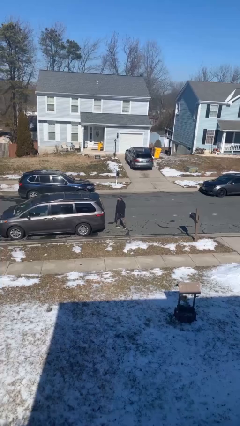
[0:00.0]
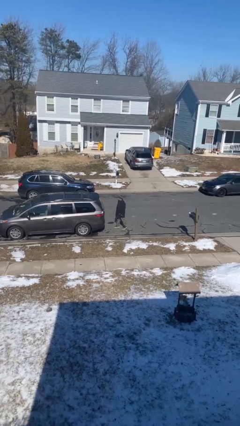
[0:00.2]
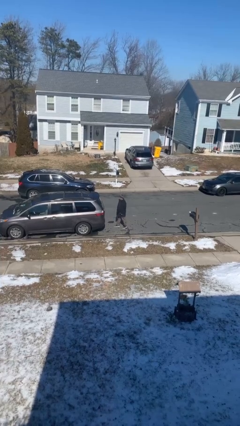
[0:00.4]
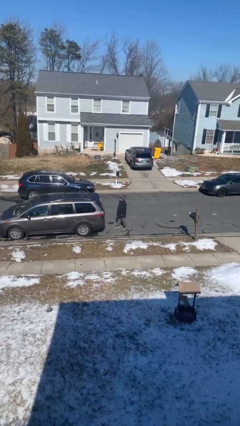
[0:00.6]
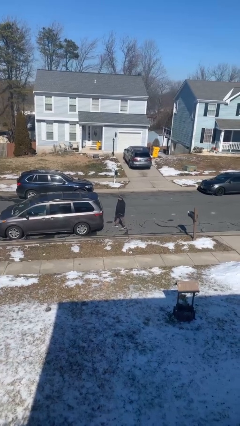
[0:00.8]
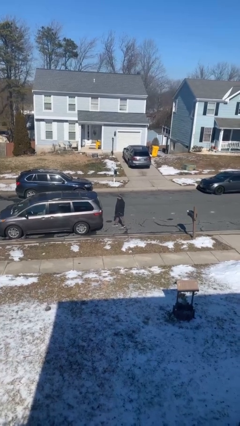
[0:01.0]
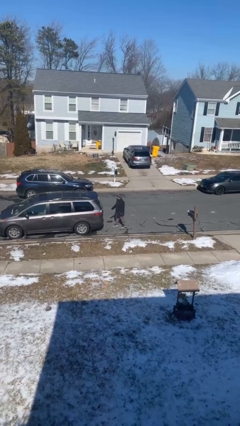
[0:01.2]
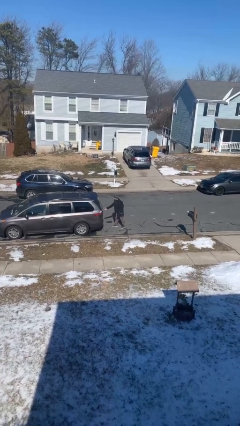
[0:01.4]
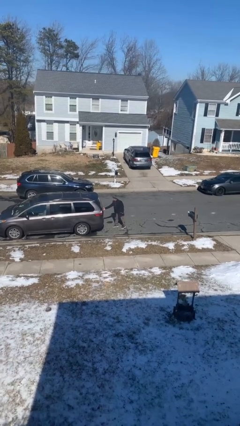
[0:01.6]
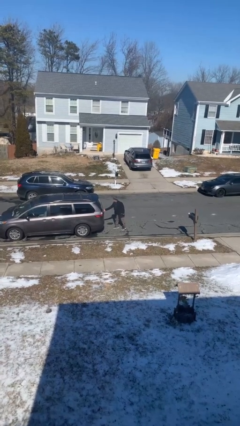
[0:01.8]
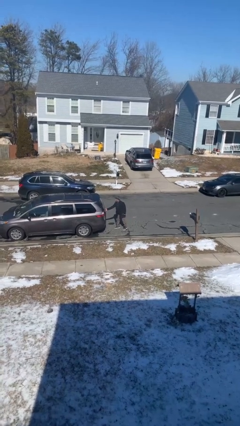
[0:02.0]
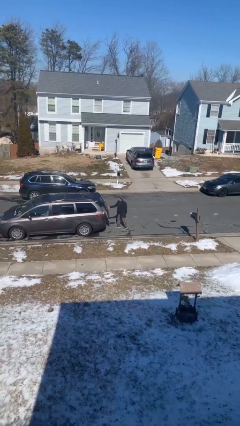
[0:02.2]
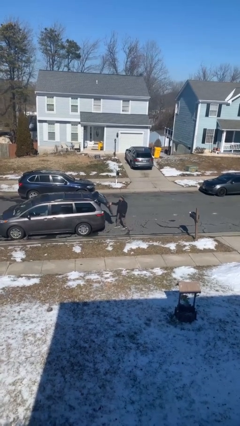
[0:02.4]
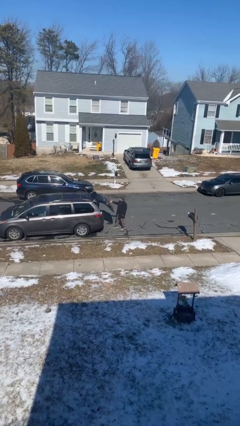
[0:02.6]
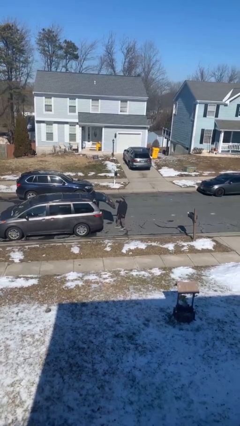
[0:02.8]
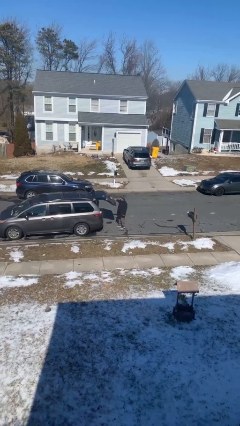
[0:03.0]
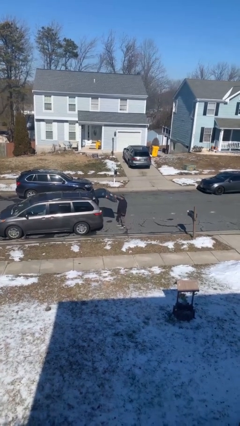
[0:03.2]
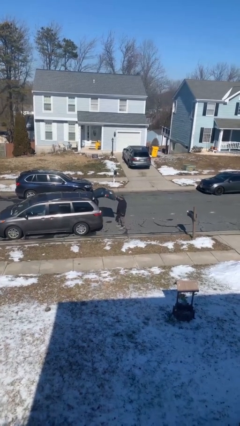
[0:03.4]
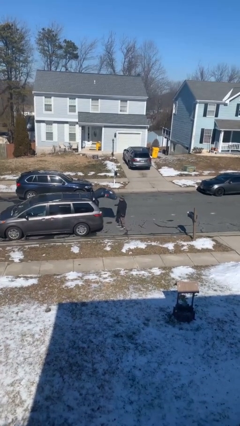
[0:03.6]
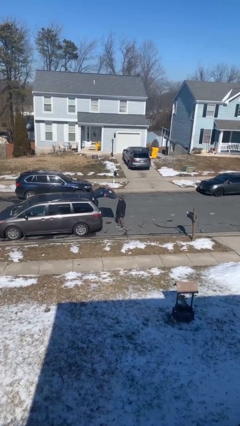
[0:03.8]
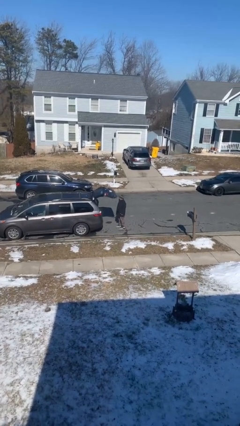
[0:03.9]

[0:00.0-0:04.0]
person opens car trunk

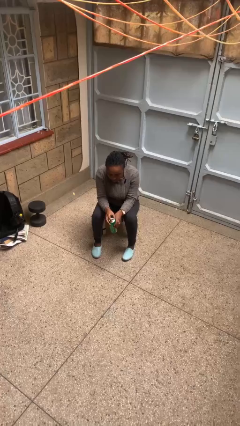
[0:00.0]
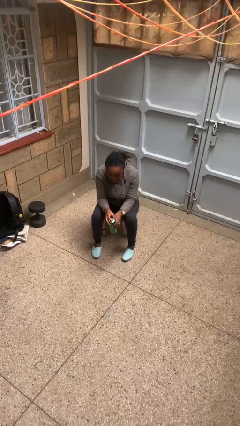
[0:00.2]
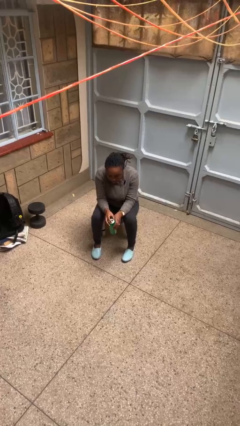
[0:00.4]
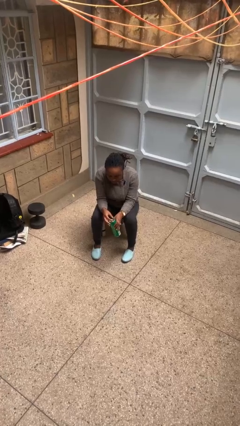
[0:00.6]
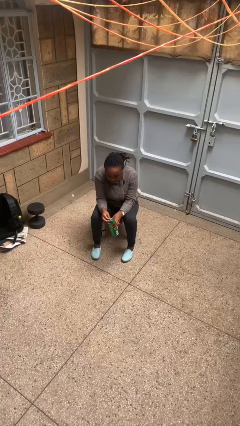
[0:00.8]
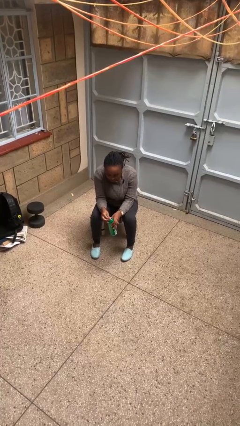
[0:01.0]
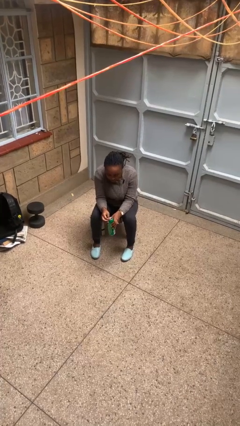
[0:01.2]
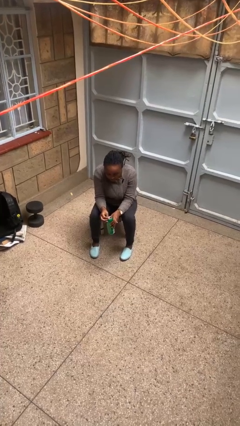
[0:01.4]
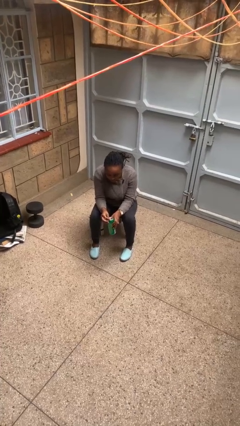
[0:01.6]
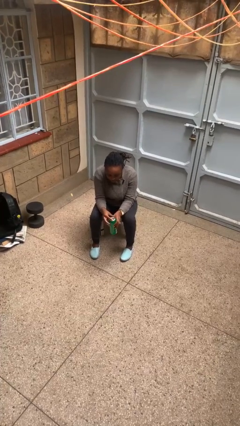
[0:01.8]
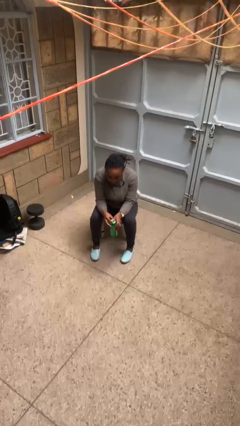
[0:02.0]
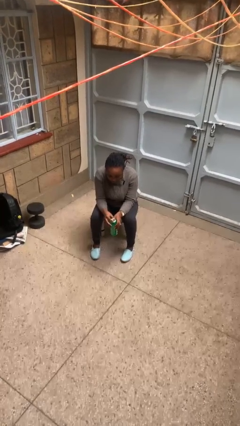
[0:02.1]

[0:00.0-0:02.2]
person opens beverage can

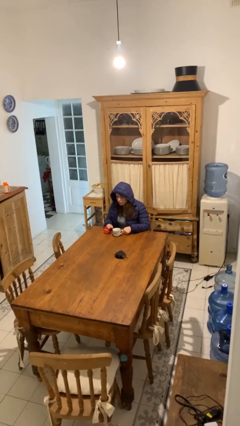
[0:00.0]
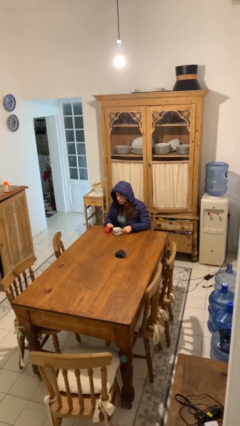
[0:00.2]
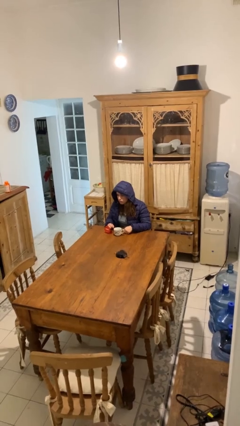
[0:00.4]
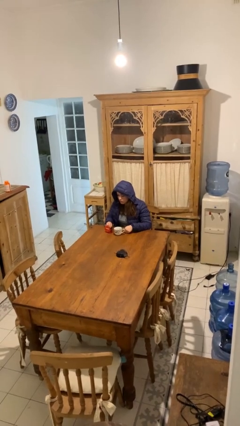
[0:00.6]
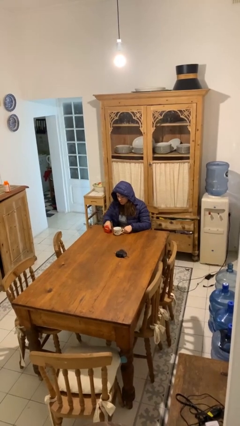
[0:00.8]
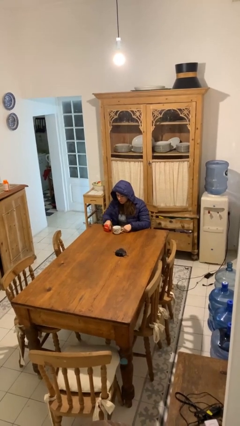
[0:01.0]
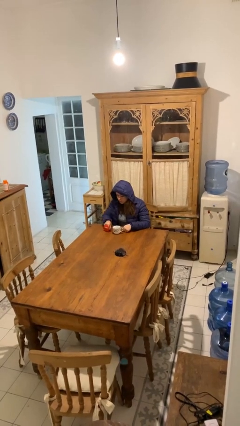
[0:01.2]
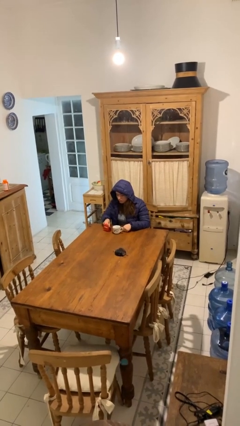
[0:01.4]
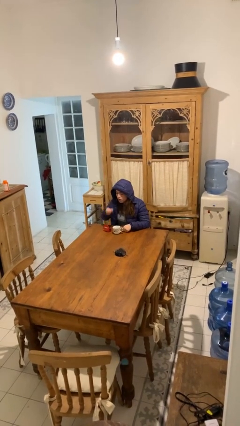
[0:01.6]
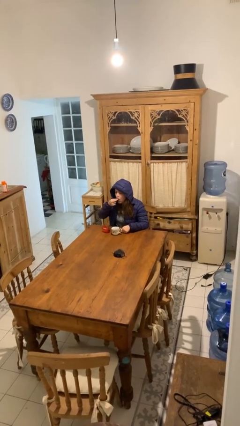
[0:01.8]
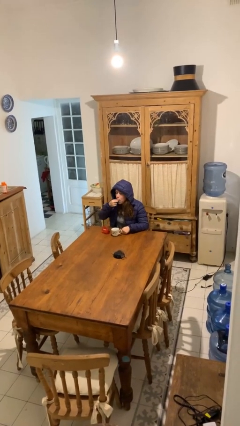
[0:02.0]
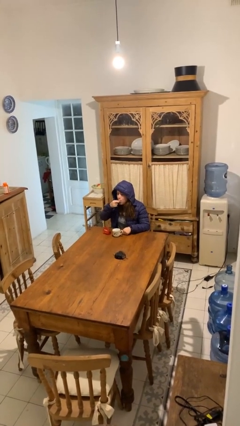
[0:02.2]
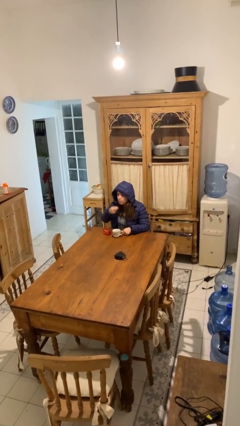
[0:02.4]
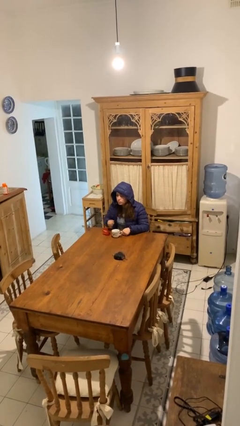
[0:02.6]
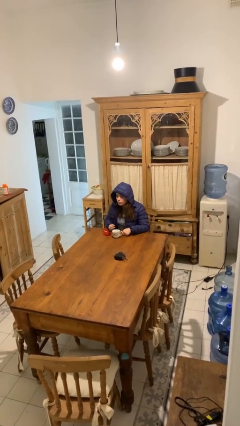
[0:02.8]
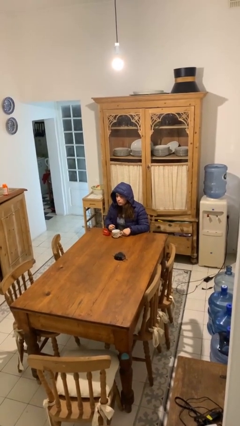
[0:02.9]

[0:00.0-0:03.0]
person takes medicine pills

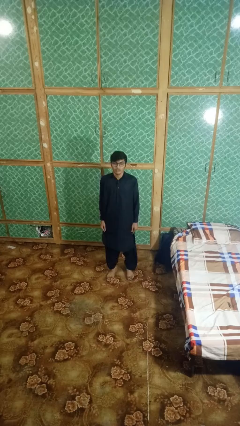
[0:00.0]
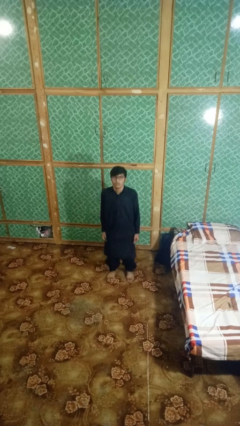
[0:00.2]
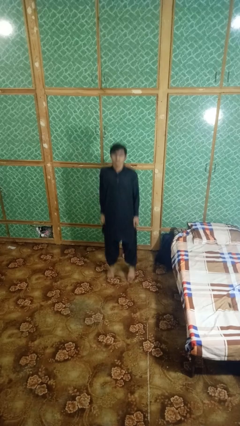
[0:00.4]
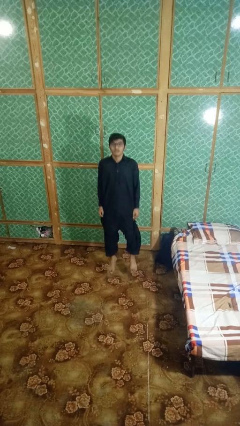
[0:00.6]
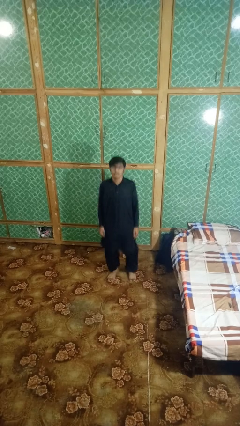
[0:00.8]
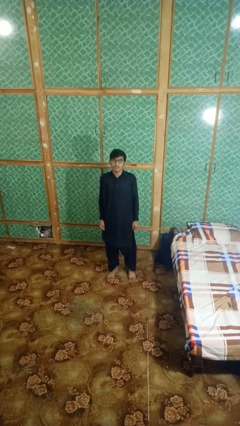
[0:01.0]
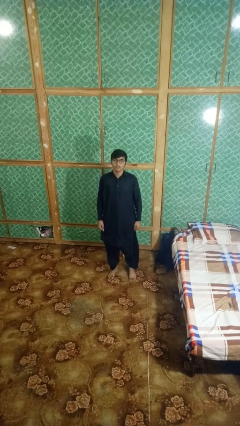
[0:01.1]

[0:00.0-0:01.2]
person jumps

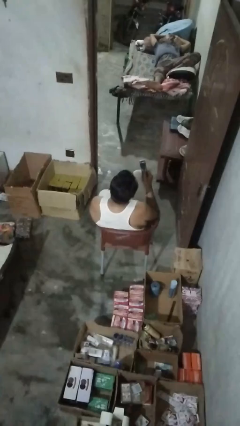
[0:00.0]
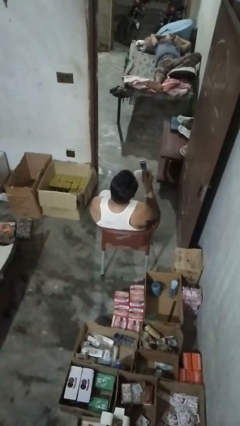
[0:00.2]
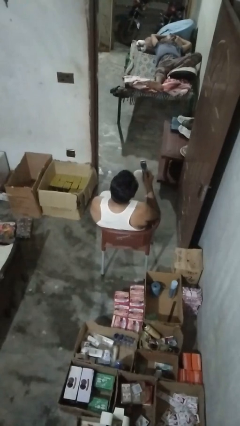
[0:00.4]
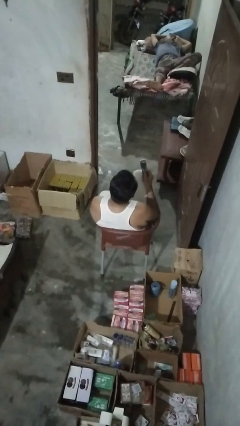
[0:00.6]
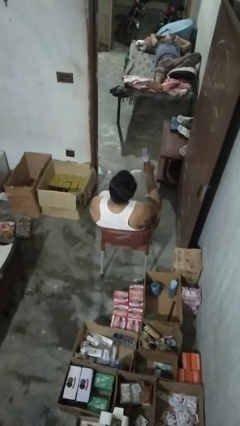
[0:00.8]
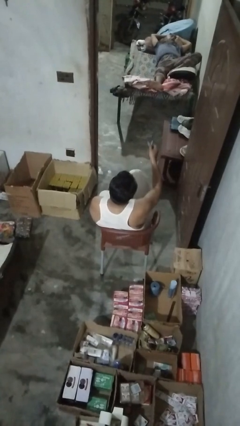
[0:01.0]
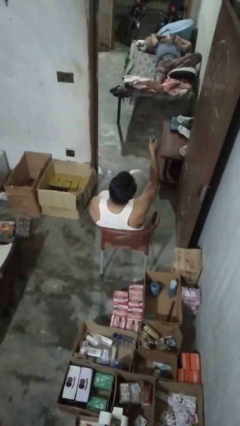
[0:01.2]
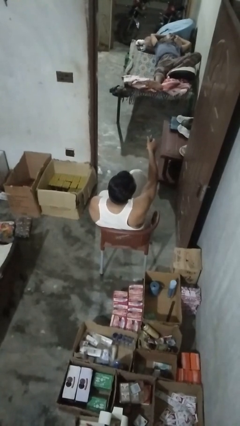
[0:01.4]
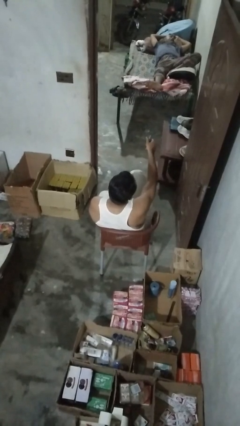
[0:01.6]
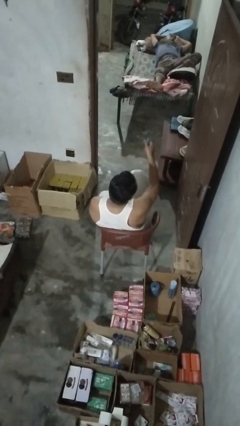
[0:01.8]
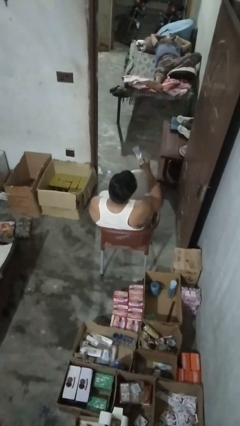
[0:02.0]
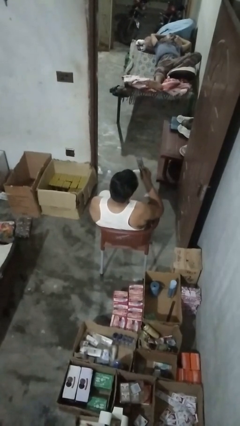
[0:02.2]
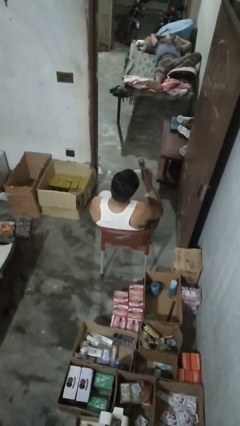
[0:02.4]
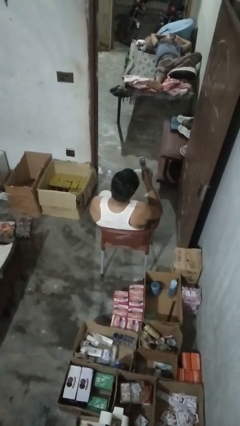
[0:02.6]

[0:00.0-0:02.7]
person uses television remote

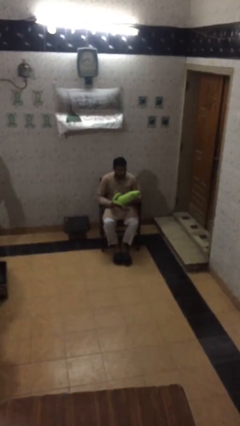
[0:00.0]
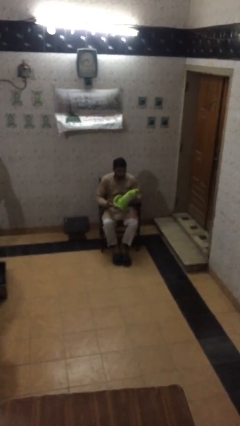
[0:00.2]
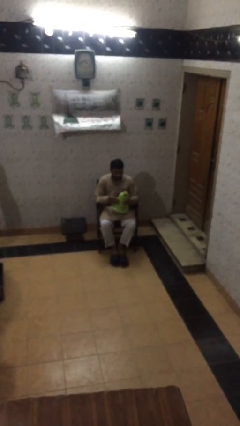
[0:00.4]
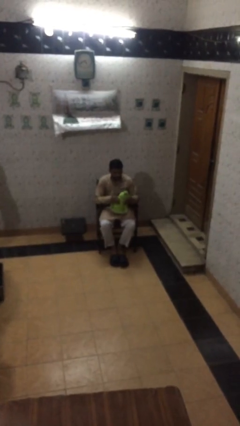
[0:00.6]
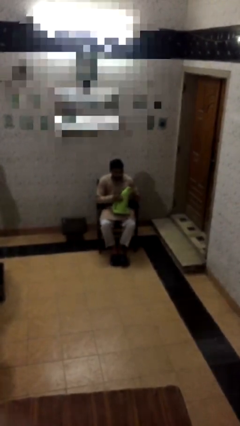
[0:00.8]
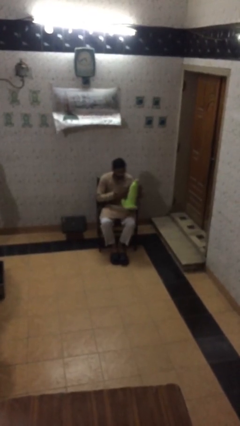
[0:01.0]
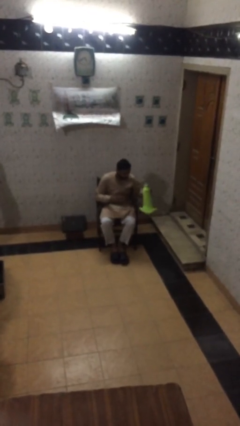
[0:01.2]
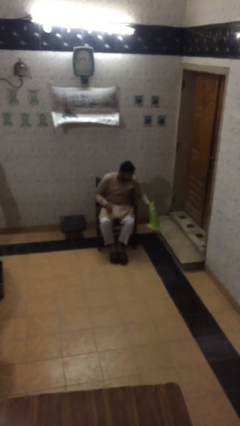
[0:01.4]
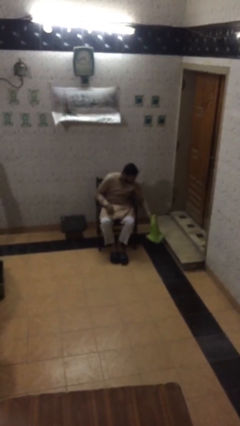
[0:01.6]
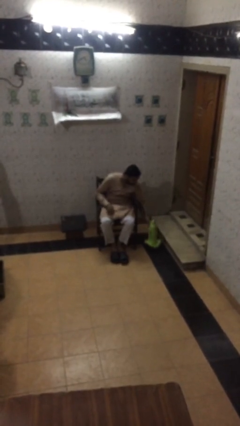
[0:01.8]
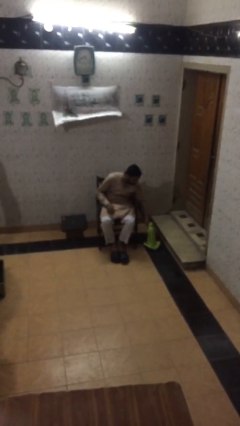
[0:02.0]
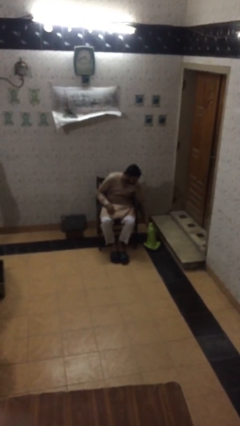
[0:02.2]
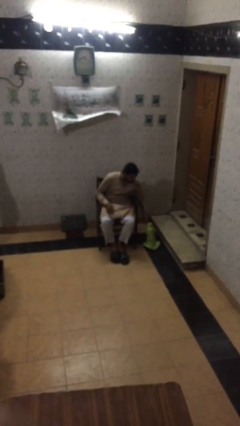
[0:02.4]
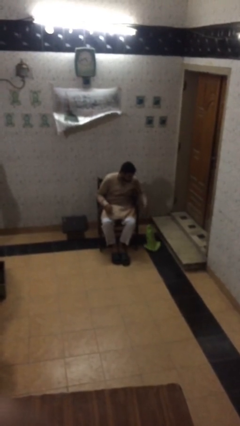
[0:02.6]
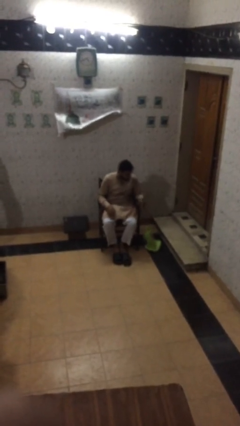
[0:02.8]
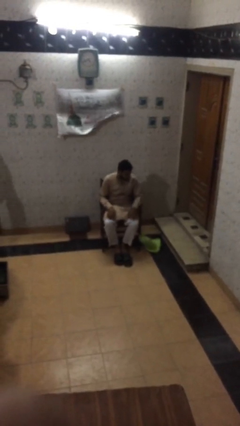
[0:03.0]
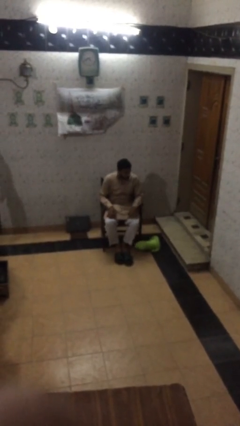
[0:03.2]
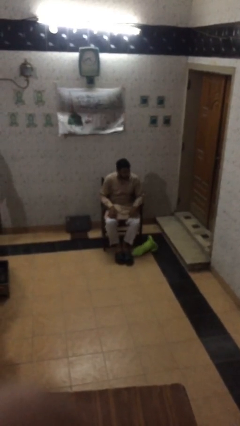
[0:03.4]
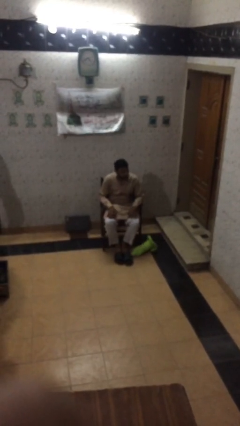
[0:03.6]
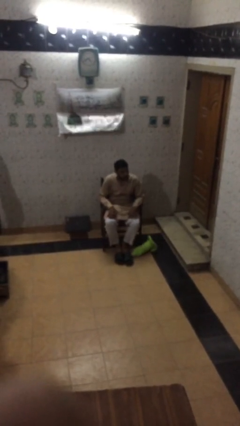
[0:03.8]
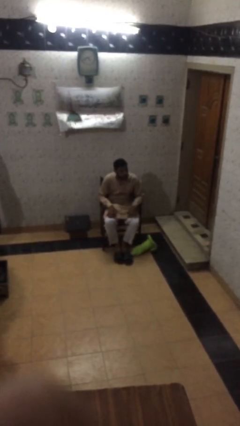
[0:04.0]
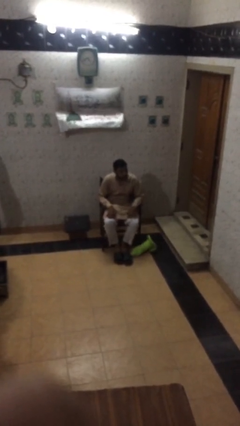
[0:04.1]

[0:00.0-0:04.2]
person puts down object on floor

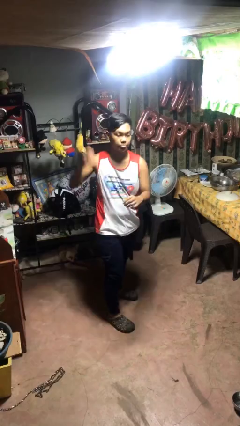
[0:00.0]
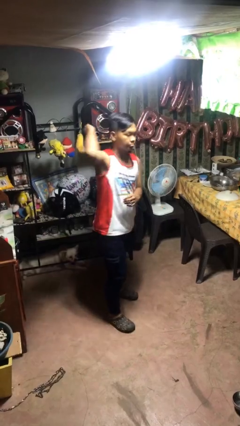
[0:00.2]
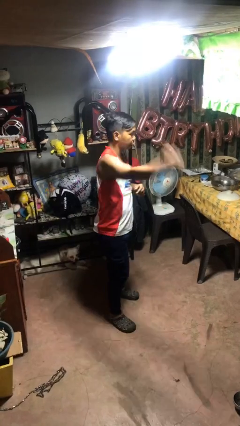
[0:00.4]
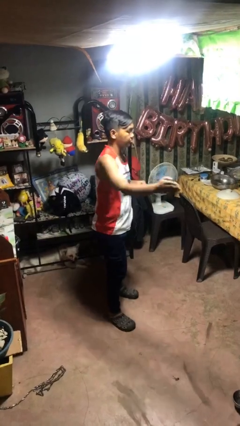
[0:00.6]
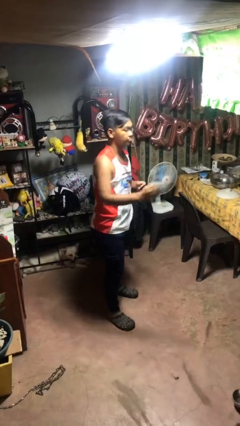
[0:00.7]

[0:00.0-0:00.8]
person karate chop
